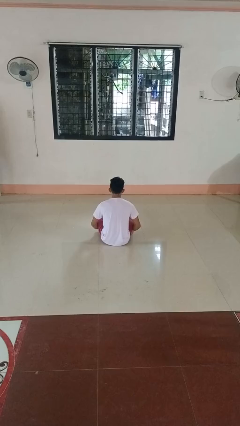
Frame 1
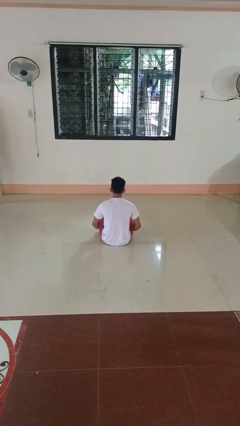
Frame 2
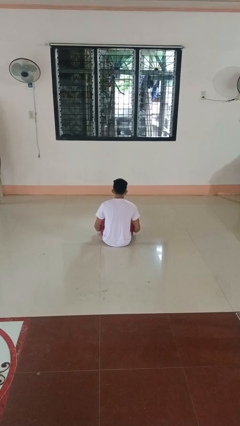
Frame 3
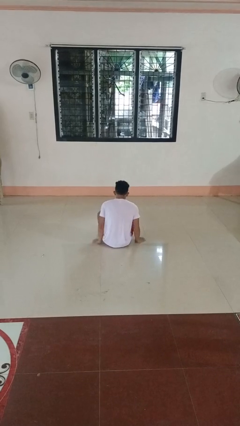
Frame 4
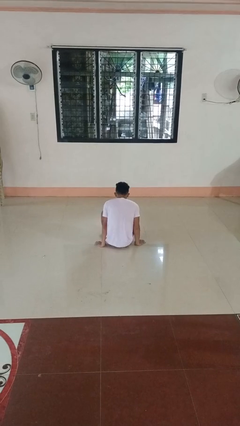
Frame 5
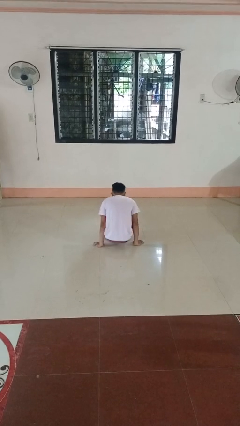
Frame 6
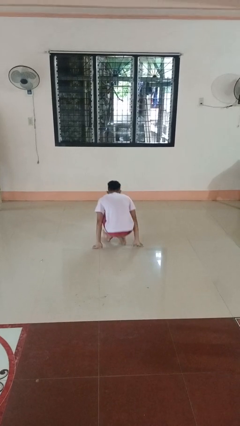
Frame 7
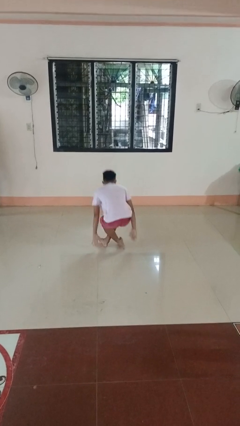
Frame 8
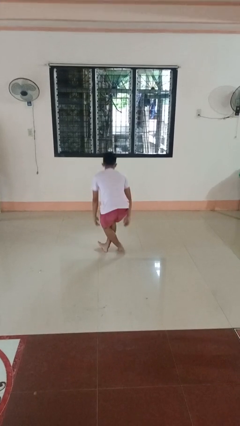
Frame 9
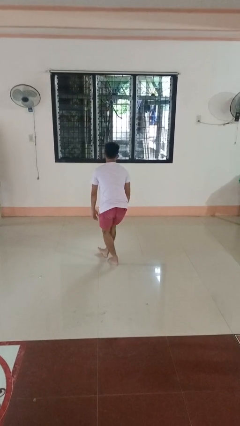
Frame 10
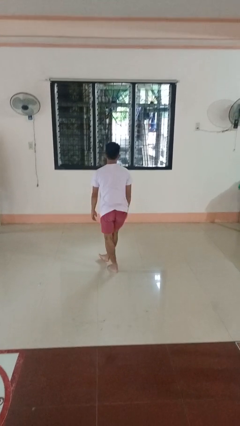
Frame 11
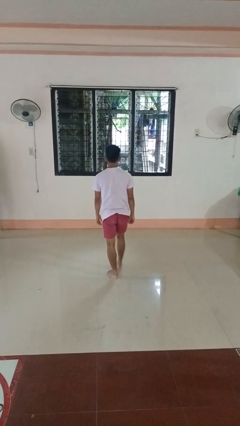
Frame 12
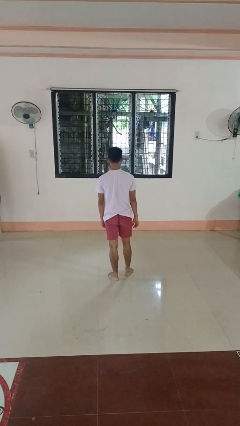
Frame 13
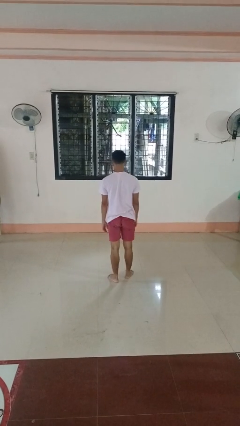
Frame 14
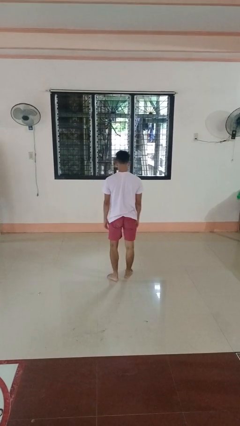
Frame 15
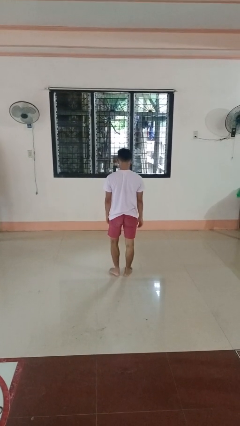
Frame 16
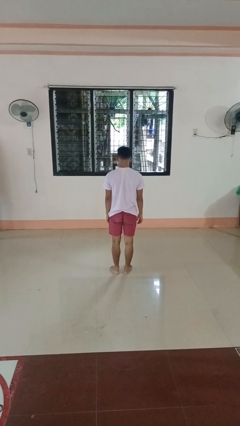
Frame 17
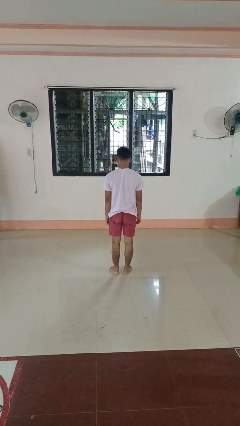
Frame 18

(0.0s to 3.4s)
person stands up from floor

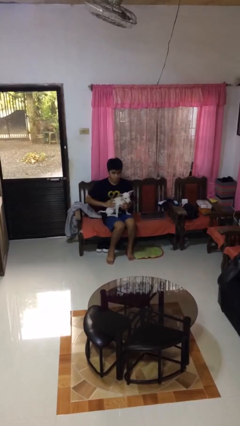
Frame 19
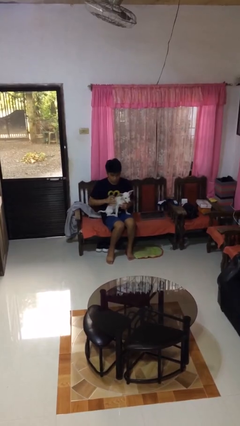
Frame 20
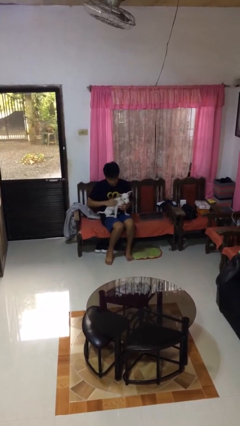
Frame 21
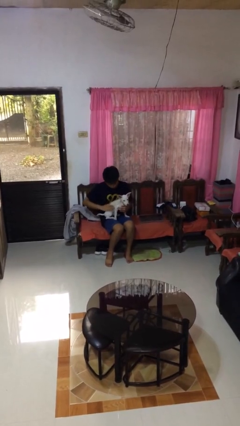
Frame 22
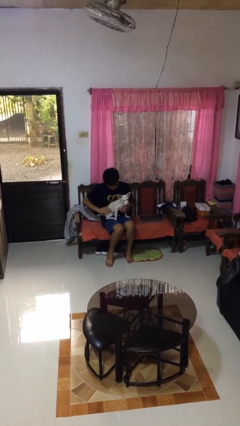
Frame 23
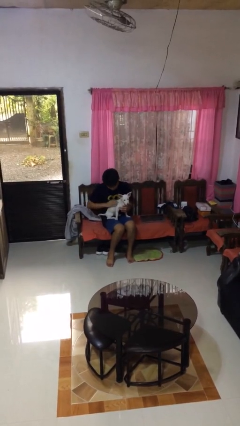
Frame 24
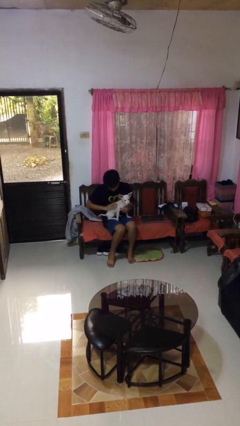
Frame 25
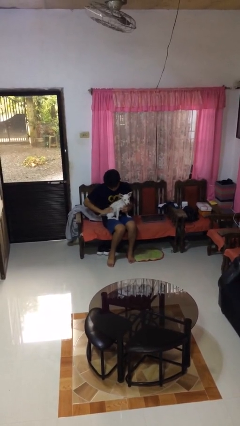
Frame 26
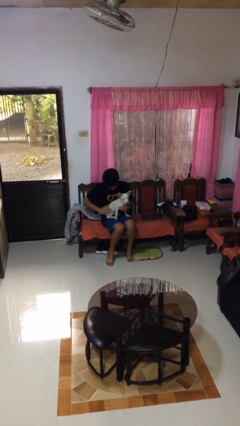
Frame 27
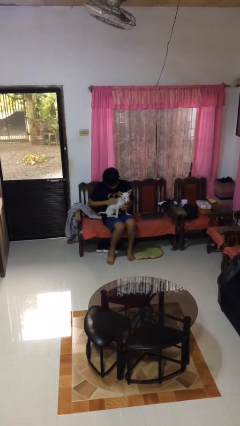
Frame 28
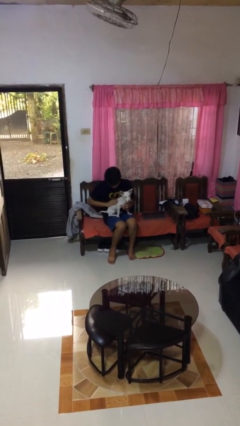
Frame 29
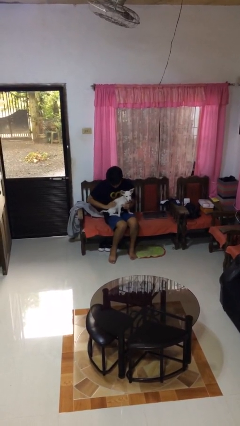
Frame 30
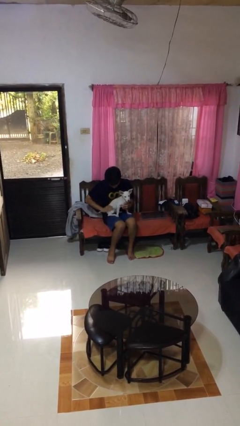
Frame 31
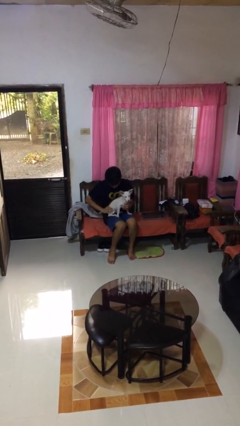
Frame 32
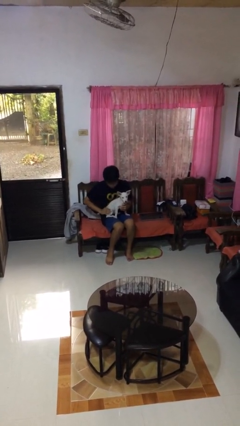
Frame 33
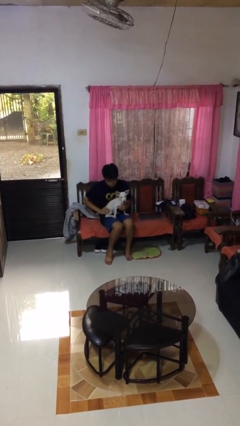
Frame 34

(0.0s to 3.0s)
person pets dog

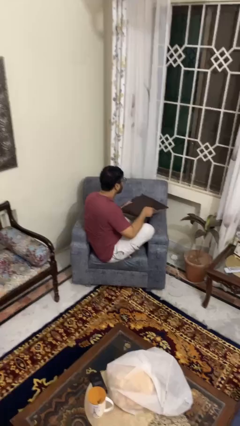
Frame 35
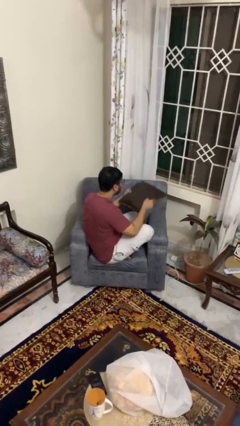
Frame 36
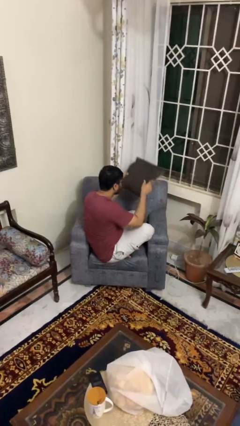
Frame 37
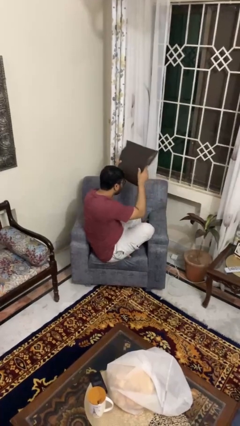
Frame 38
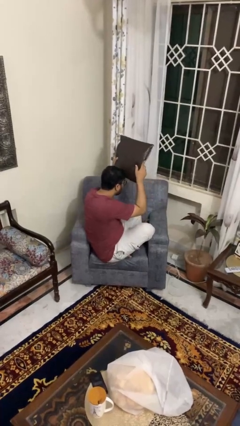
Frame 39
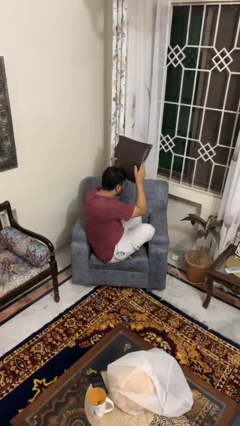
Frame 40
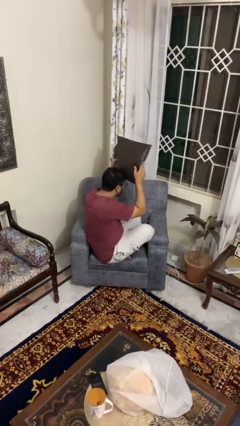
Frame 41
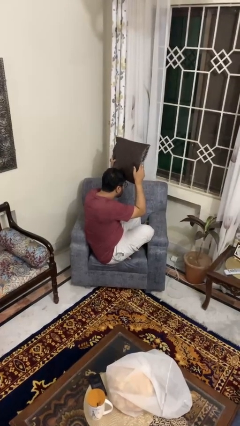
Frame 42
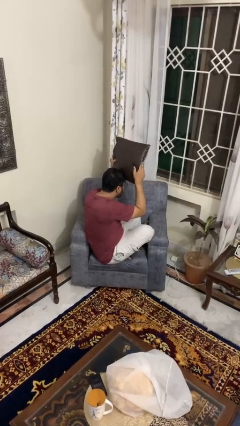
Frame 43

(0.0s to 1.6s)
person holds object above head

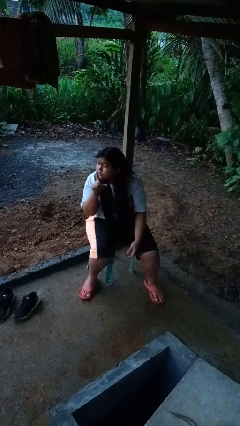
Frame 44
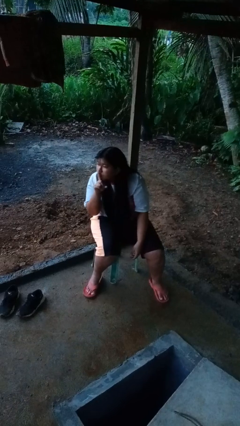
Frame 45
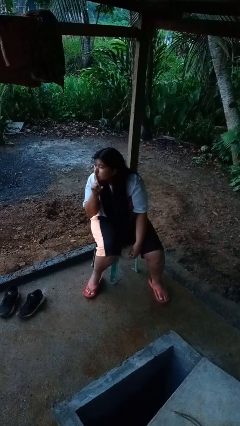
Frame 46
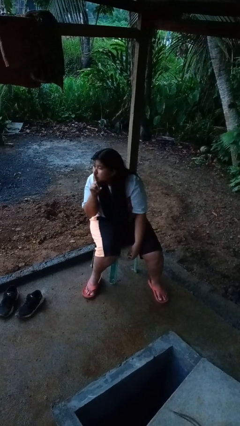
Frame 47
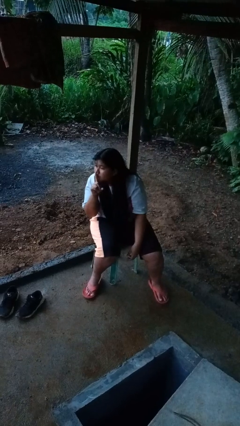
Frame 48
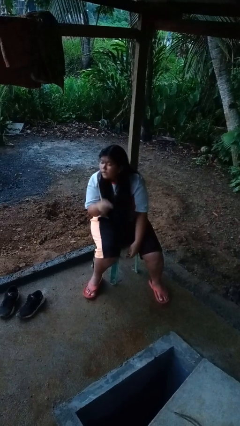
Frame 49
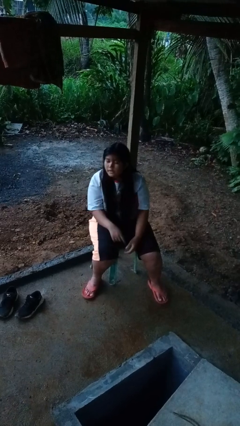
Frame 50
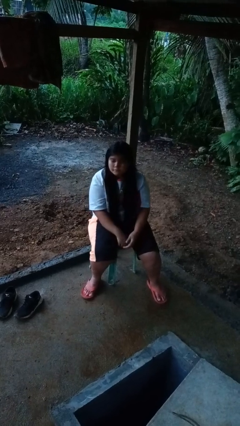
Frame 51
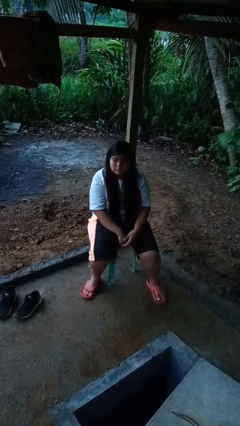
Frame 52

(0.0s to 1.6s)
person gestures be quiet

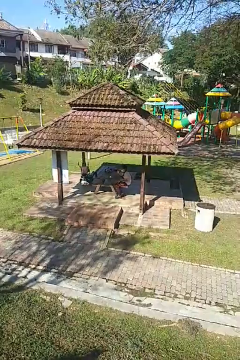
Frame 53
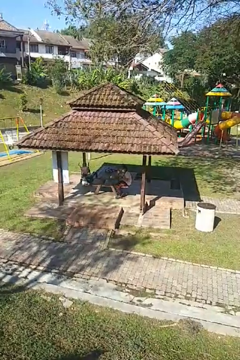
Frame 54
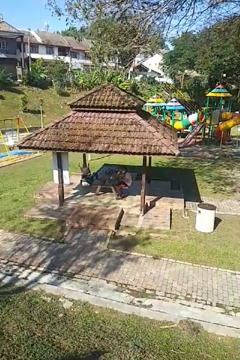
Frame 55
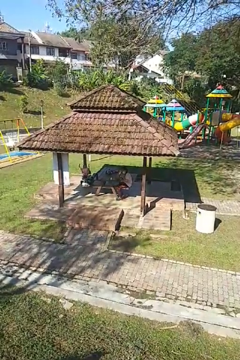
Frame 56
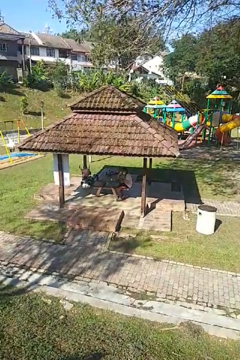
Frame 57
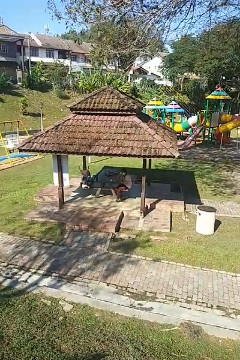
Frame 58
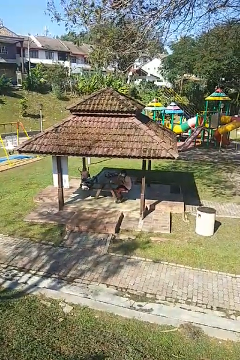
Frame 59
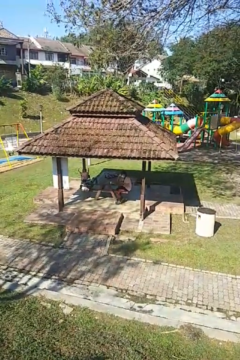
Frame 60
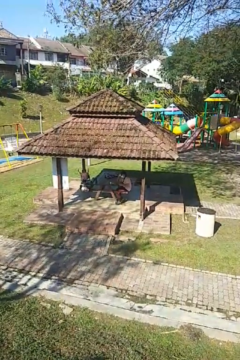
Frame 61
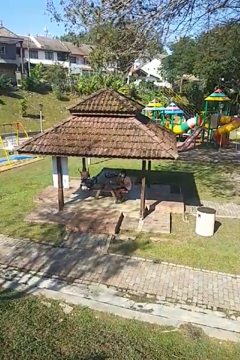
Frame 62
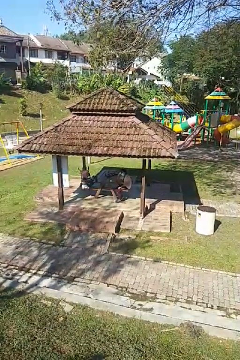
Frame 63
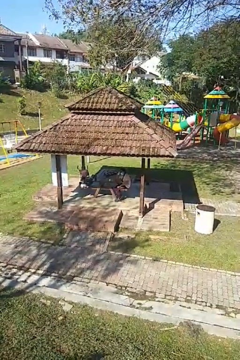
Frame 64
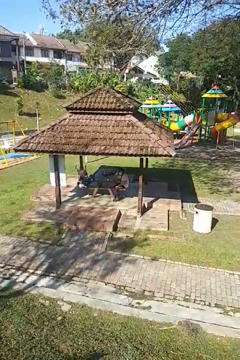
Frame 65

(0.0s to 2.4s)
person drinks from shotglass

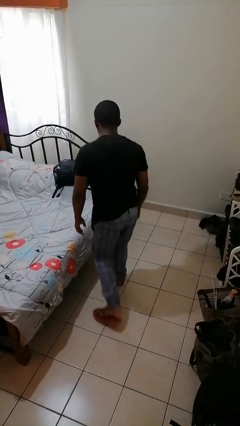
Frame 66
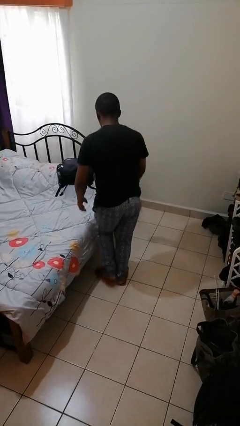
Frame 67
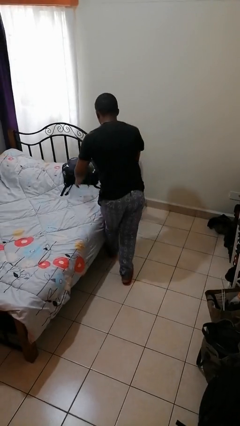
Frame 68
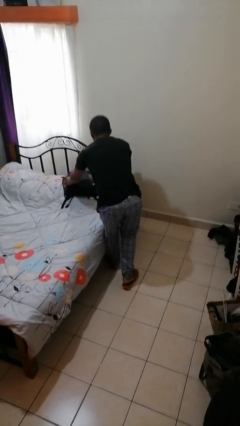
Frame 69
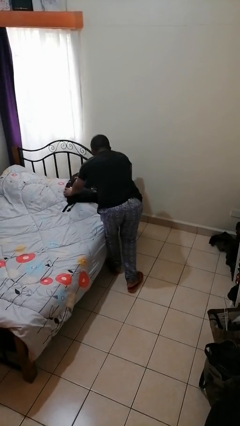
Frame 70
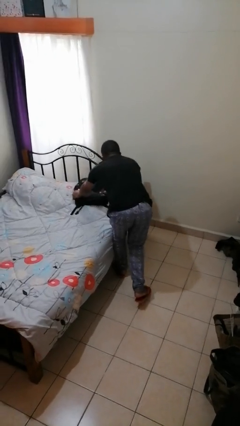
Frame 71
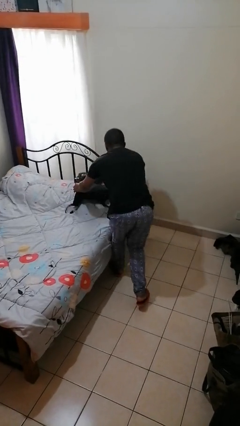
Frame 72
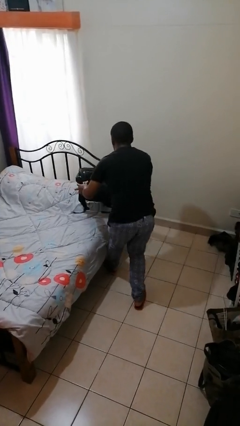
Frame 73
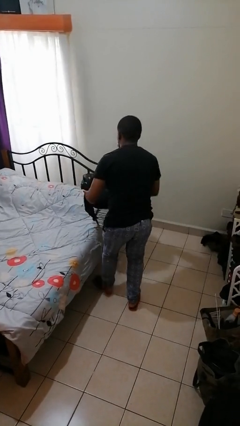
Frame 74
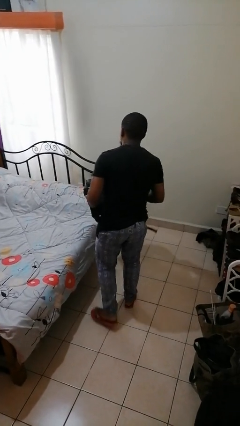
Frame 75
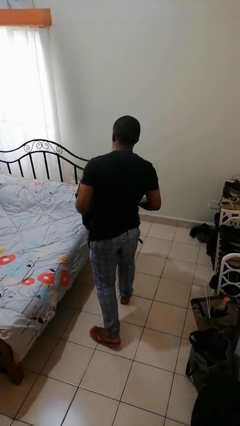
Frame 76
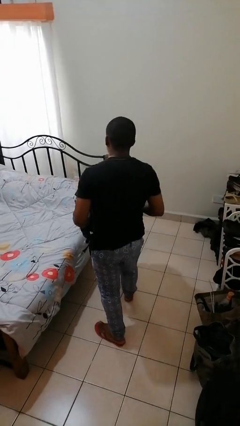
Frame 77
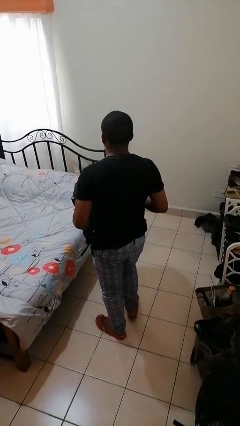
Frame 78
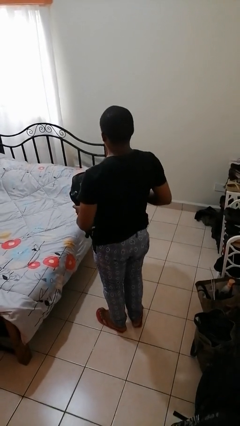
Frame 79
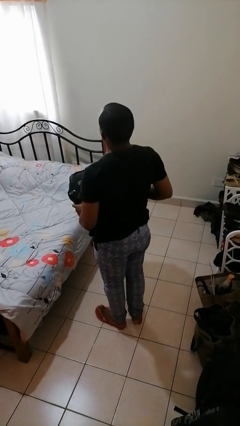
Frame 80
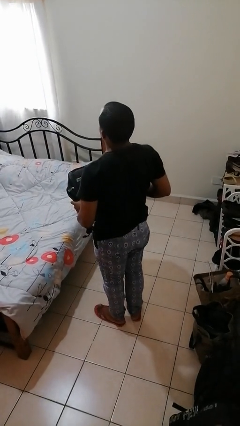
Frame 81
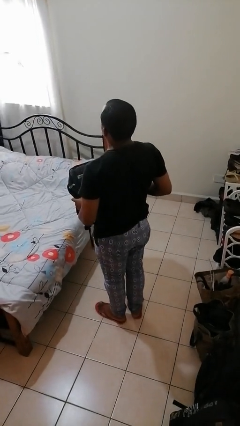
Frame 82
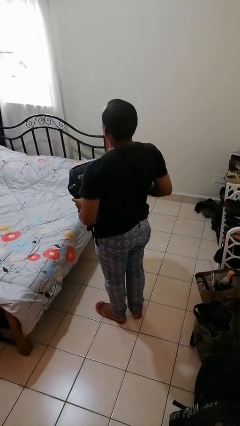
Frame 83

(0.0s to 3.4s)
person picks up object from bed

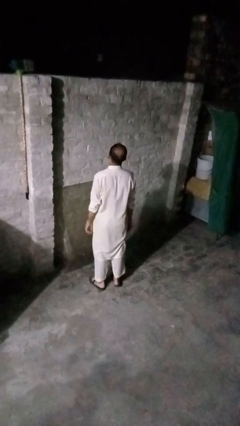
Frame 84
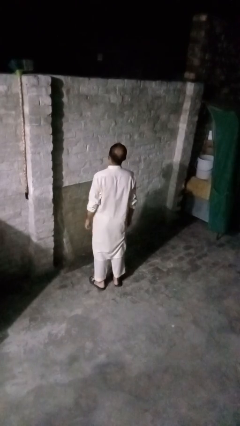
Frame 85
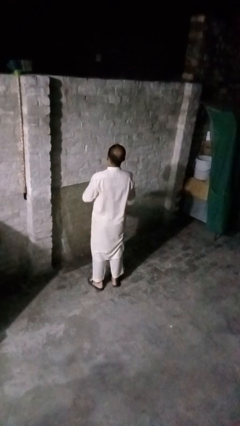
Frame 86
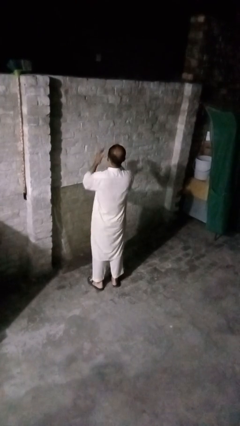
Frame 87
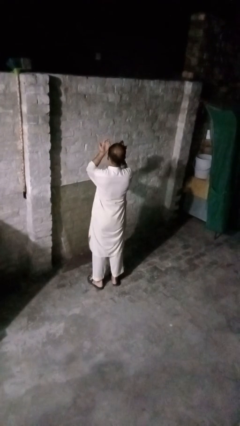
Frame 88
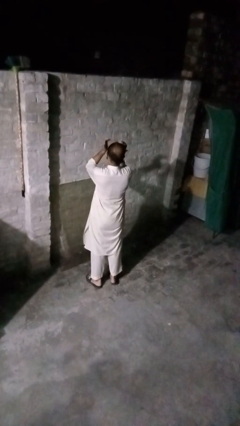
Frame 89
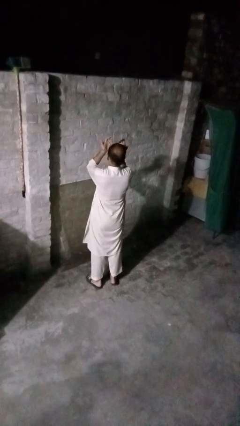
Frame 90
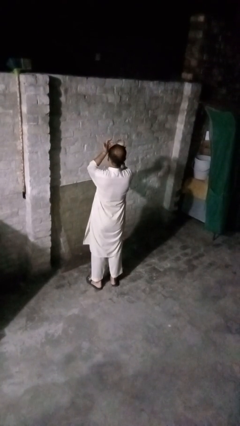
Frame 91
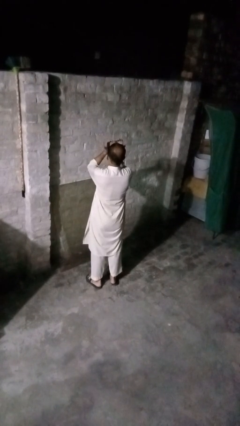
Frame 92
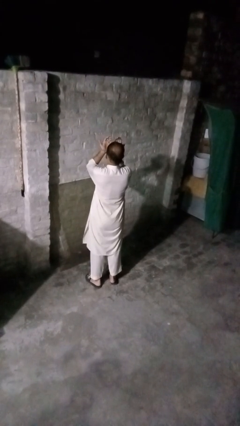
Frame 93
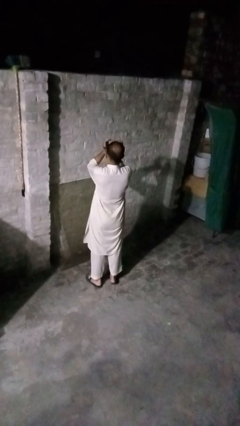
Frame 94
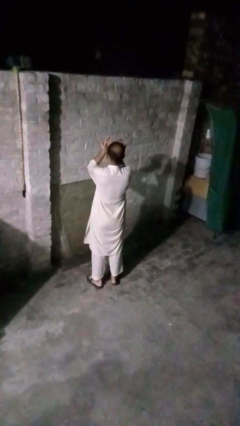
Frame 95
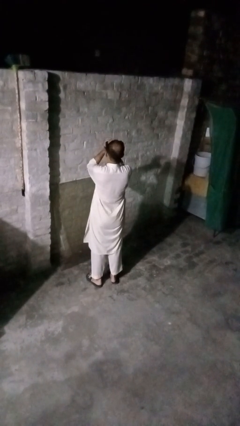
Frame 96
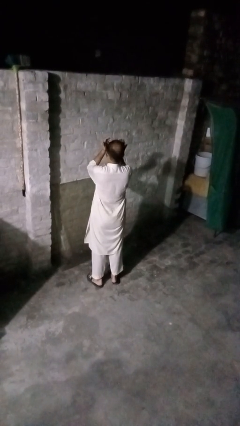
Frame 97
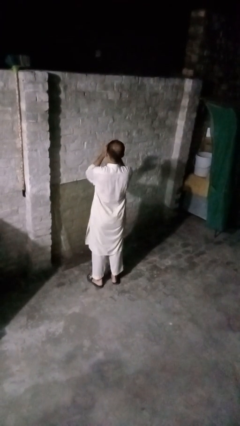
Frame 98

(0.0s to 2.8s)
person rubs eyes
